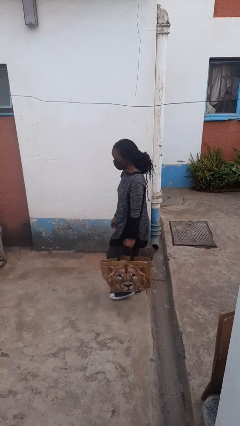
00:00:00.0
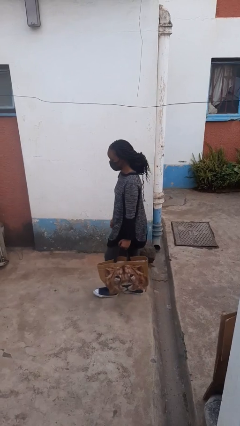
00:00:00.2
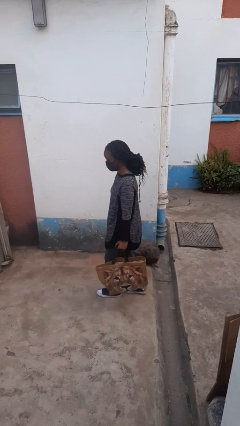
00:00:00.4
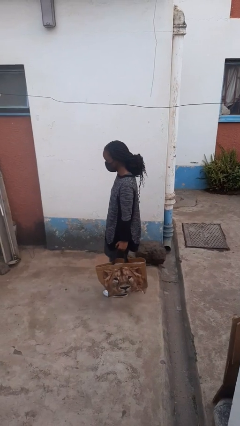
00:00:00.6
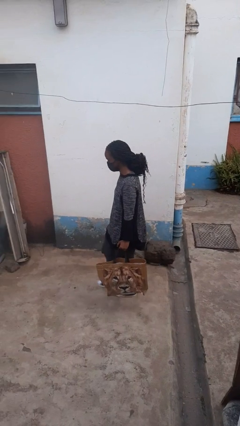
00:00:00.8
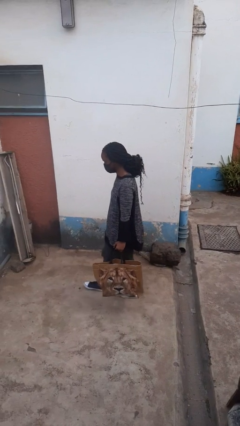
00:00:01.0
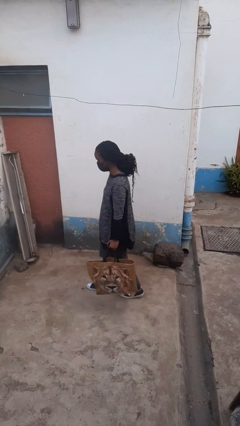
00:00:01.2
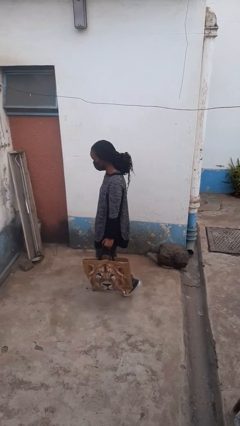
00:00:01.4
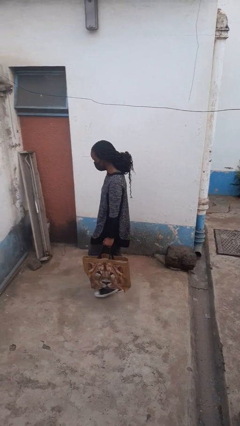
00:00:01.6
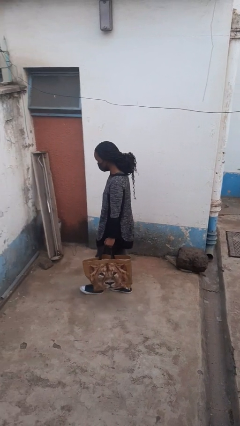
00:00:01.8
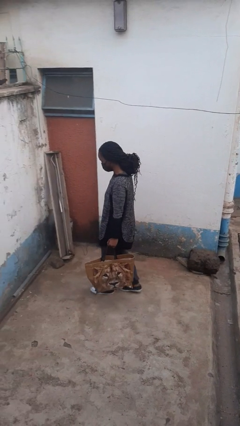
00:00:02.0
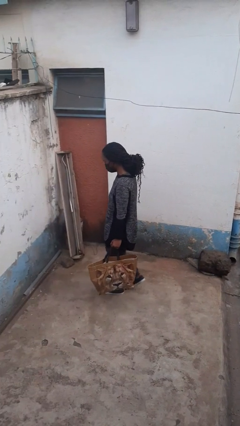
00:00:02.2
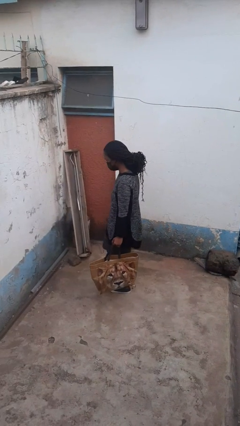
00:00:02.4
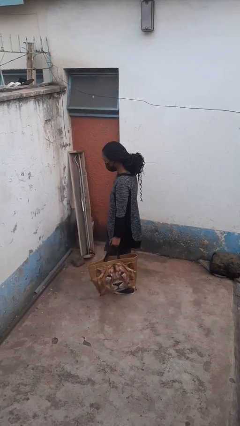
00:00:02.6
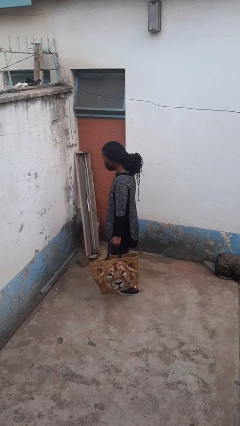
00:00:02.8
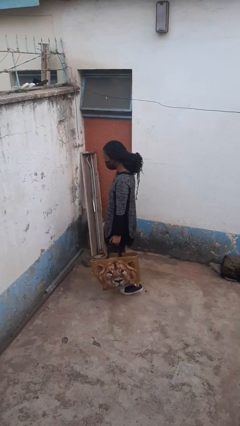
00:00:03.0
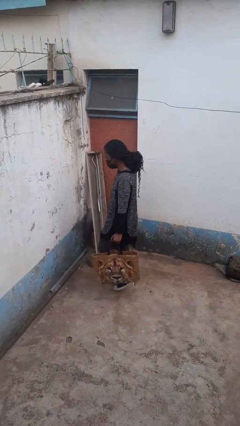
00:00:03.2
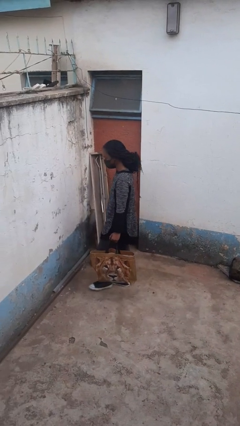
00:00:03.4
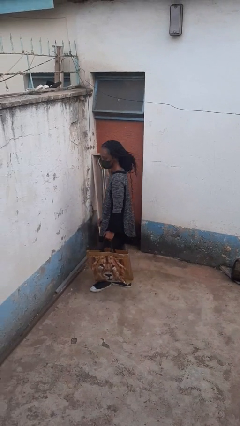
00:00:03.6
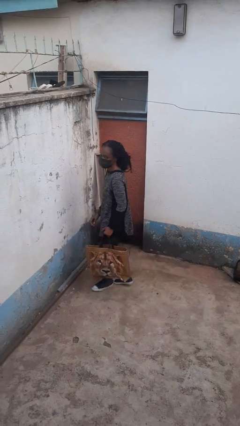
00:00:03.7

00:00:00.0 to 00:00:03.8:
person carries groceries

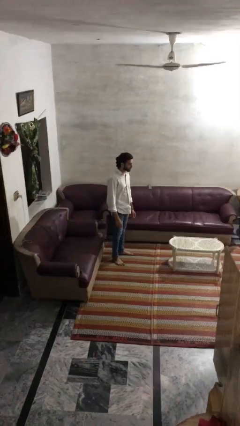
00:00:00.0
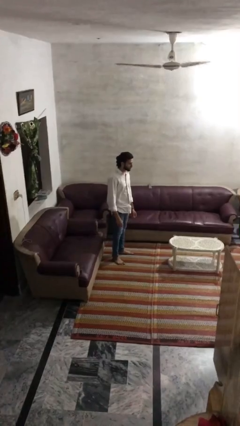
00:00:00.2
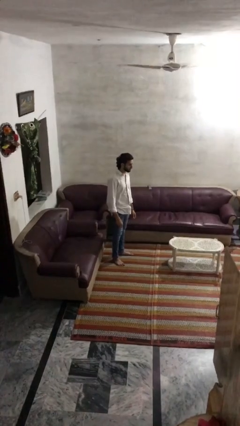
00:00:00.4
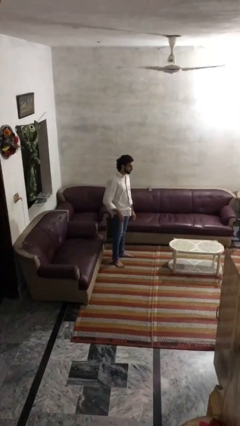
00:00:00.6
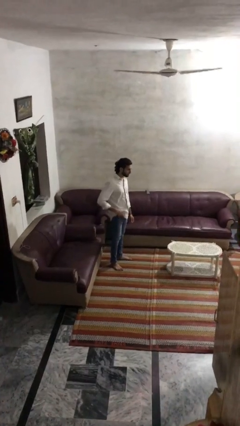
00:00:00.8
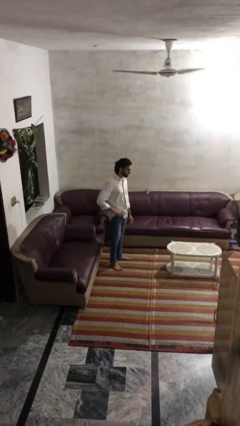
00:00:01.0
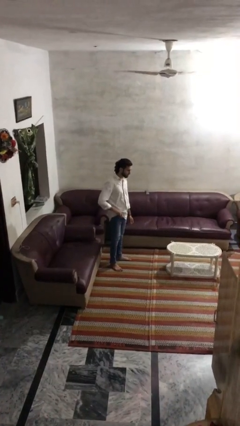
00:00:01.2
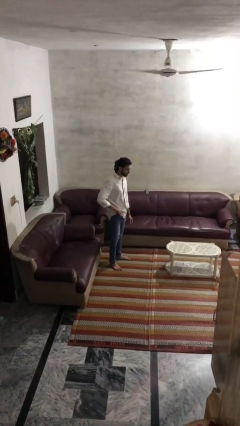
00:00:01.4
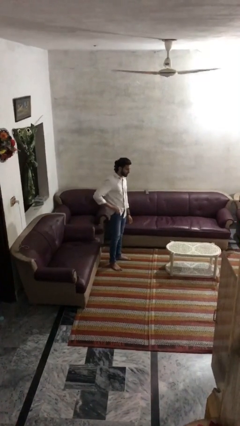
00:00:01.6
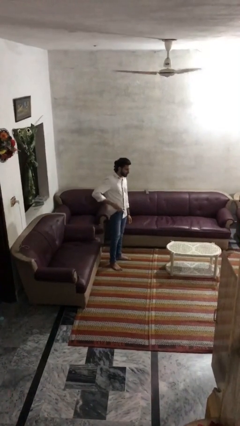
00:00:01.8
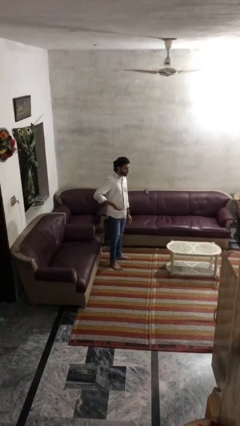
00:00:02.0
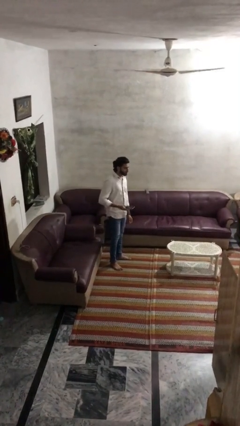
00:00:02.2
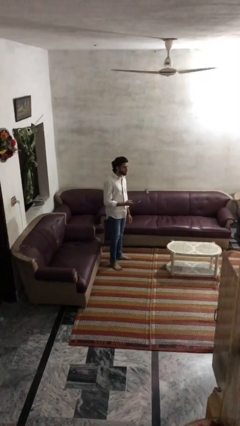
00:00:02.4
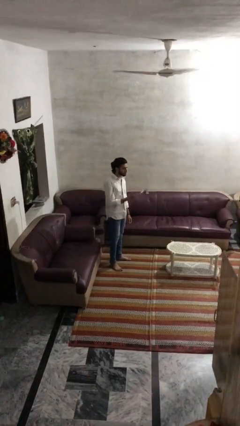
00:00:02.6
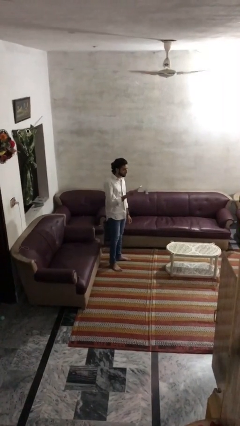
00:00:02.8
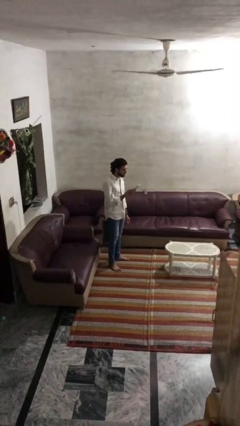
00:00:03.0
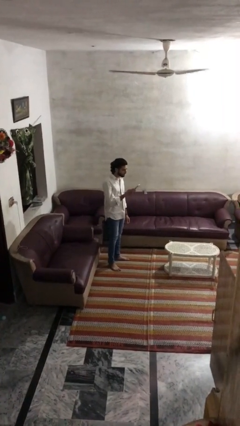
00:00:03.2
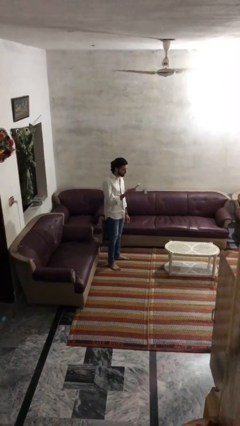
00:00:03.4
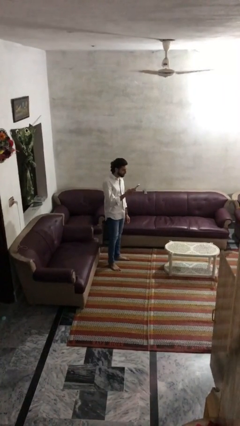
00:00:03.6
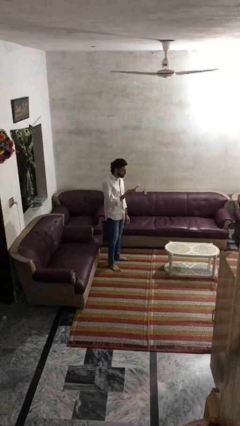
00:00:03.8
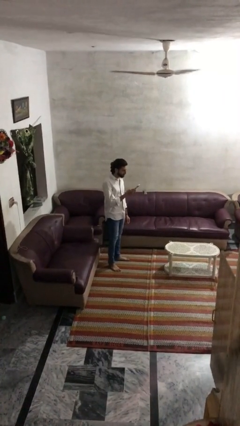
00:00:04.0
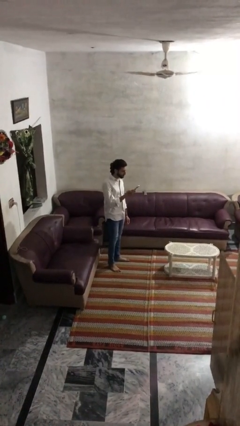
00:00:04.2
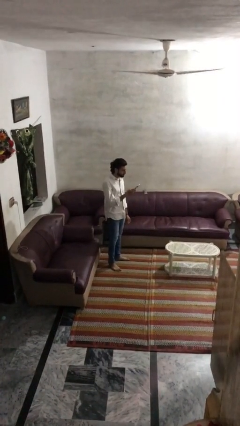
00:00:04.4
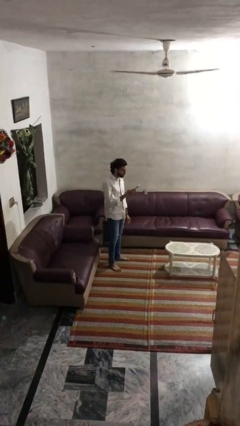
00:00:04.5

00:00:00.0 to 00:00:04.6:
person takes phone from pocket

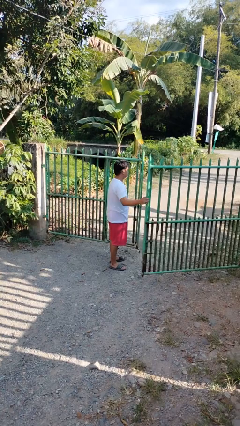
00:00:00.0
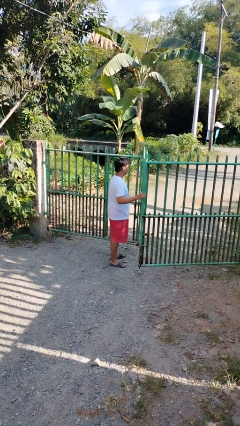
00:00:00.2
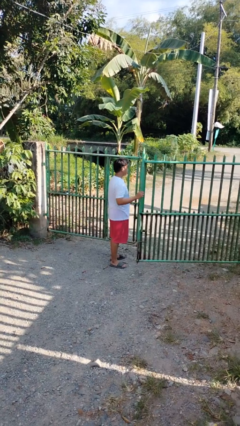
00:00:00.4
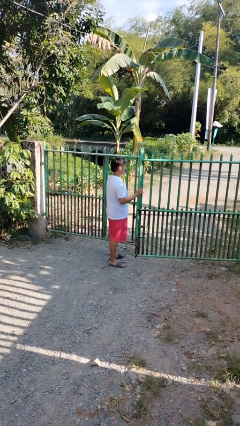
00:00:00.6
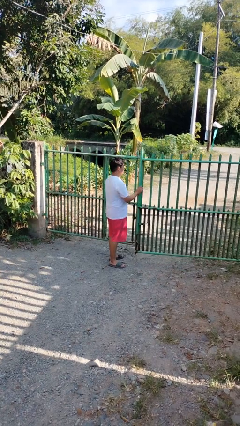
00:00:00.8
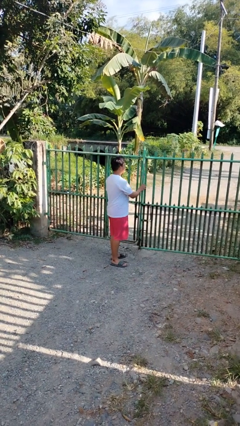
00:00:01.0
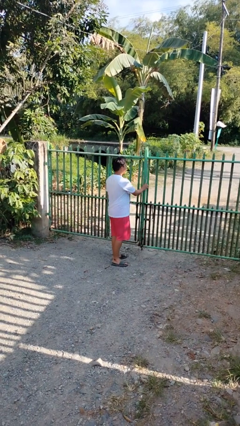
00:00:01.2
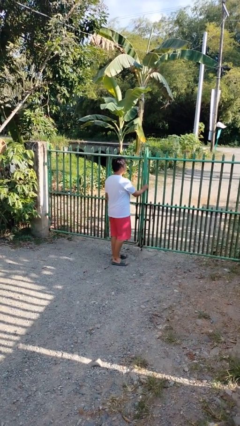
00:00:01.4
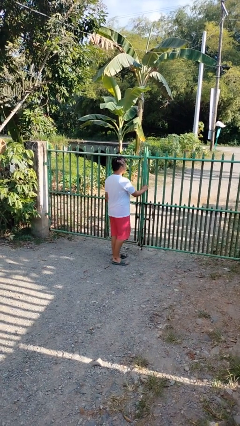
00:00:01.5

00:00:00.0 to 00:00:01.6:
person closes gate

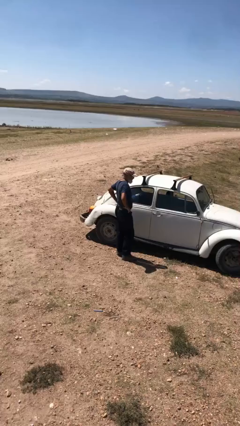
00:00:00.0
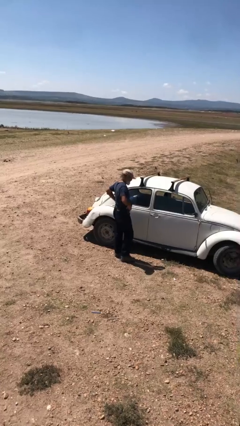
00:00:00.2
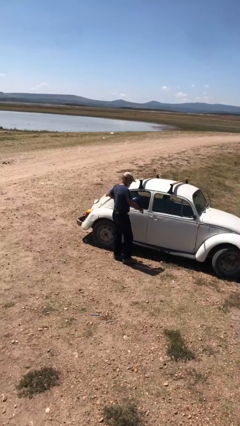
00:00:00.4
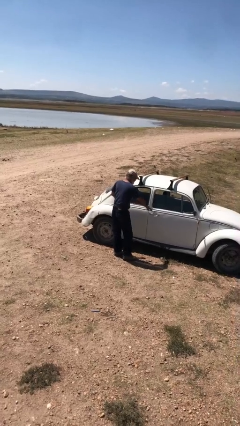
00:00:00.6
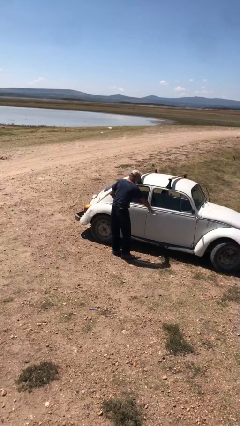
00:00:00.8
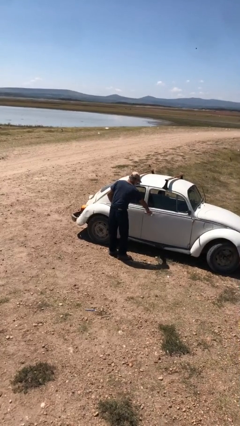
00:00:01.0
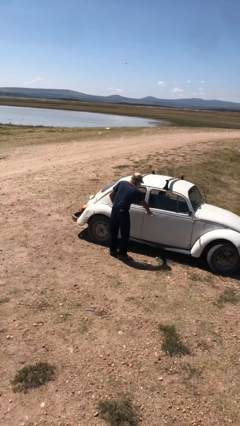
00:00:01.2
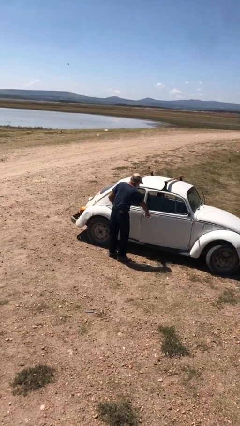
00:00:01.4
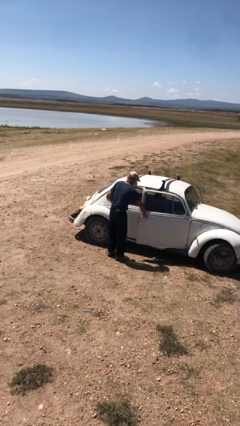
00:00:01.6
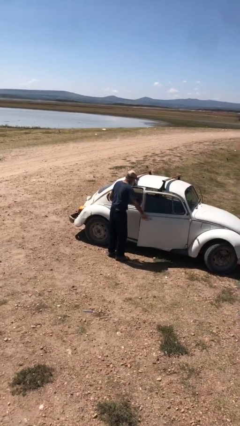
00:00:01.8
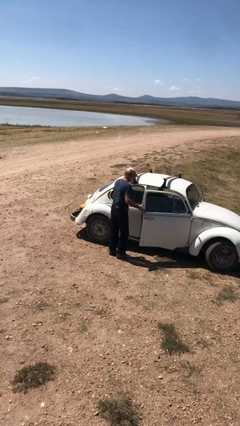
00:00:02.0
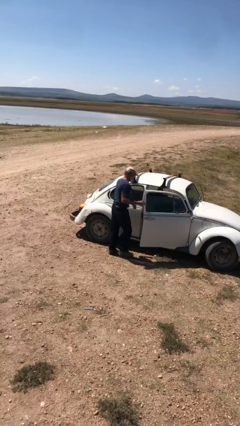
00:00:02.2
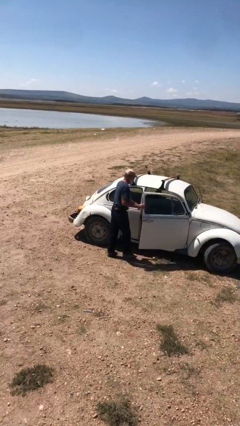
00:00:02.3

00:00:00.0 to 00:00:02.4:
person opens car door

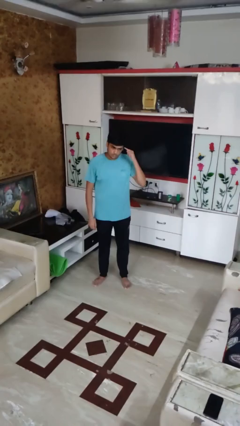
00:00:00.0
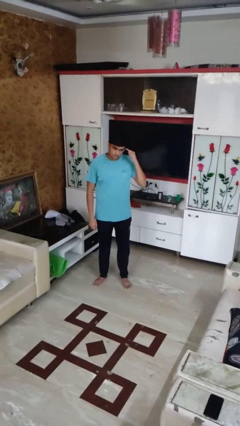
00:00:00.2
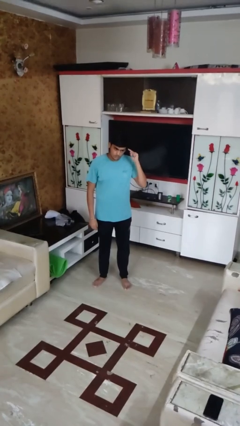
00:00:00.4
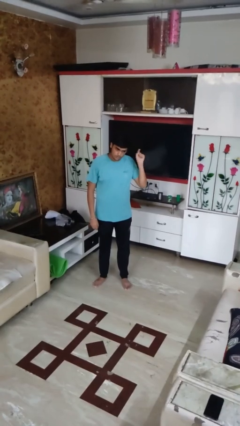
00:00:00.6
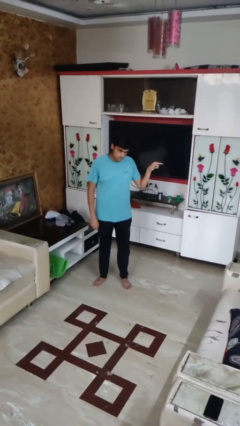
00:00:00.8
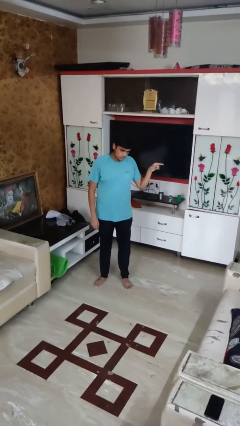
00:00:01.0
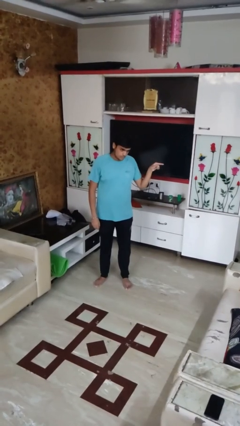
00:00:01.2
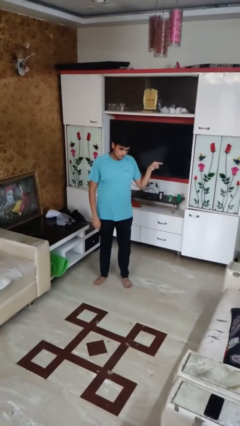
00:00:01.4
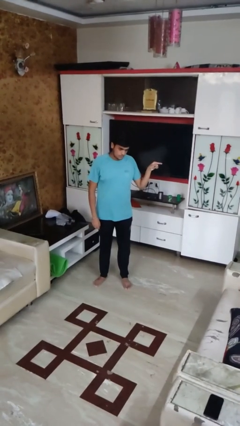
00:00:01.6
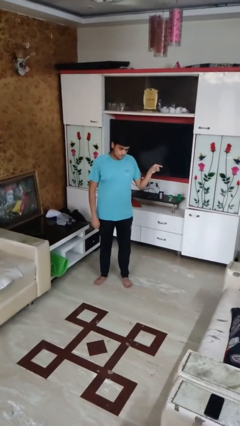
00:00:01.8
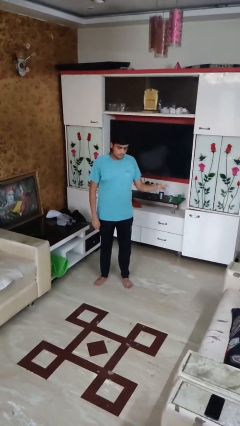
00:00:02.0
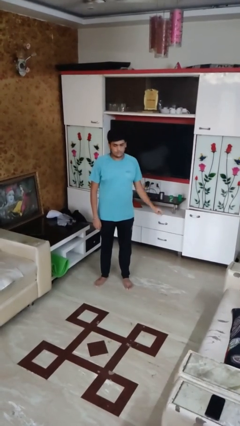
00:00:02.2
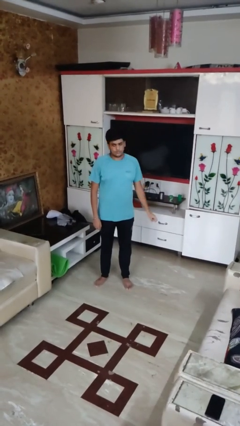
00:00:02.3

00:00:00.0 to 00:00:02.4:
person gestures listen closely

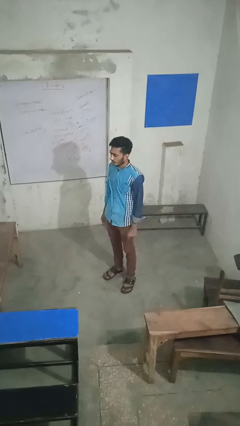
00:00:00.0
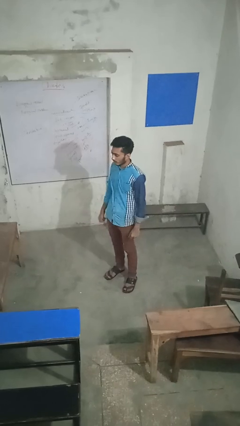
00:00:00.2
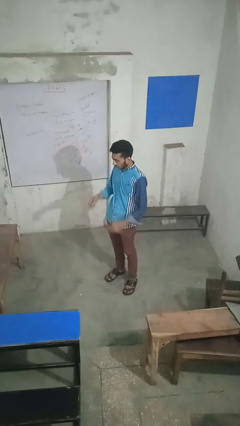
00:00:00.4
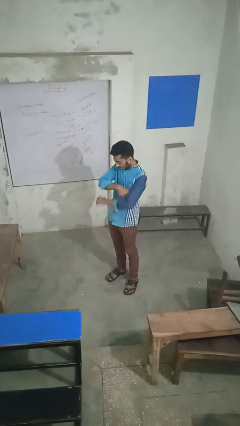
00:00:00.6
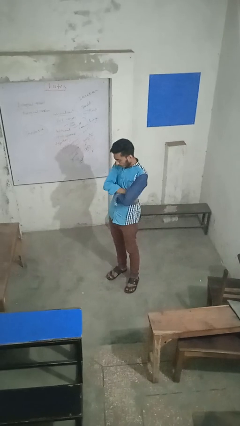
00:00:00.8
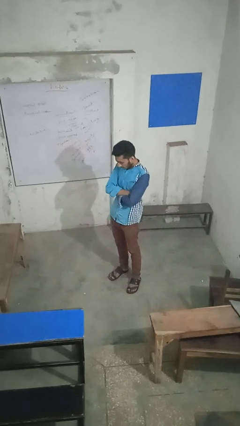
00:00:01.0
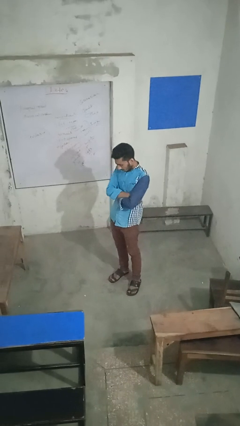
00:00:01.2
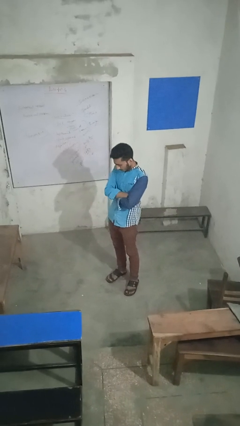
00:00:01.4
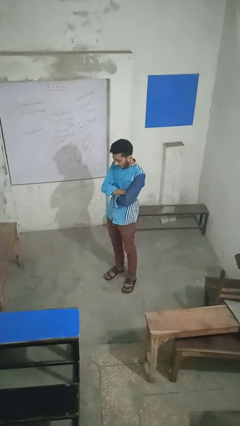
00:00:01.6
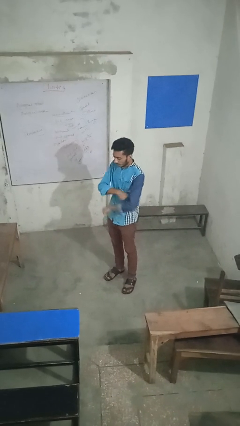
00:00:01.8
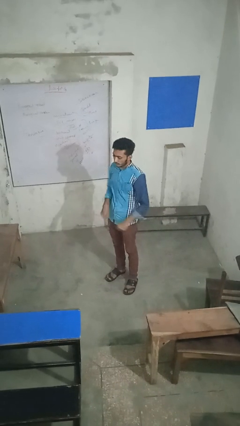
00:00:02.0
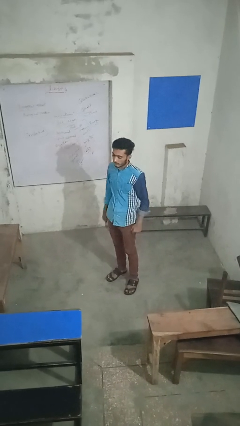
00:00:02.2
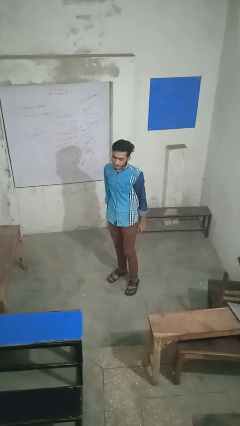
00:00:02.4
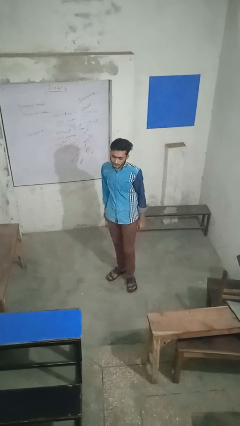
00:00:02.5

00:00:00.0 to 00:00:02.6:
person crosses arms
